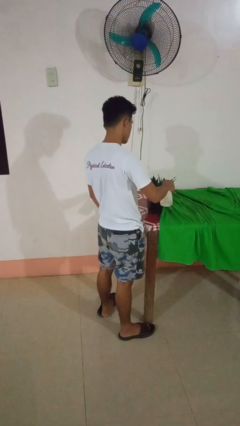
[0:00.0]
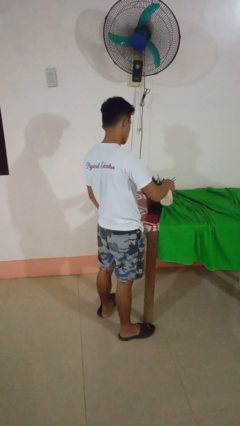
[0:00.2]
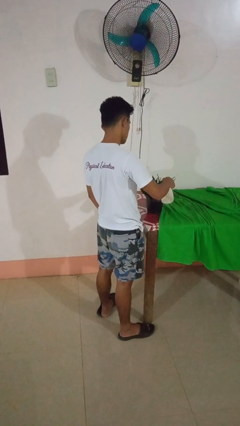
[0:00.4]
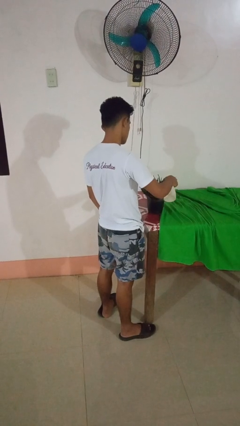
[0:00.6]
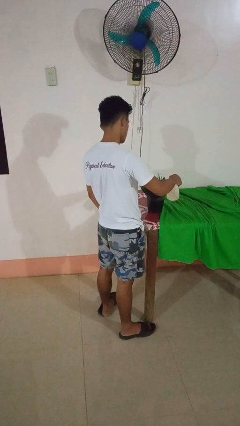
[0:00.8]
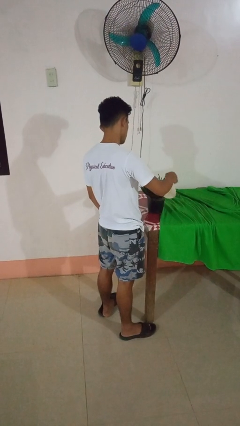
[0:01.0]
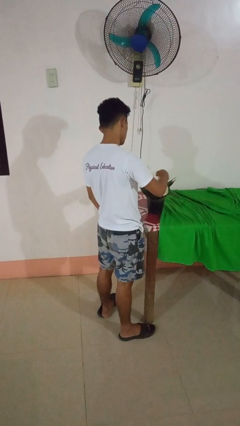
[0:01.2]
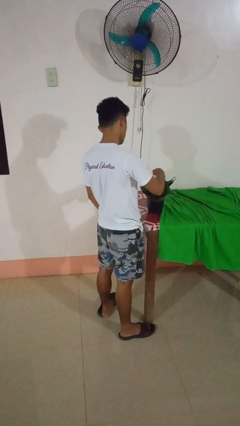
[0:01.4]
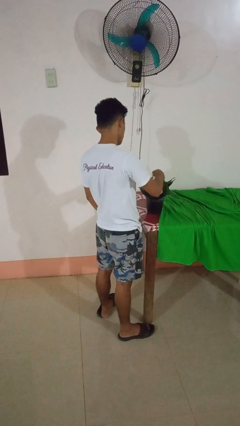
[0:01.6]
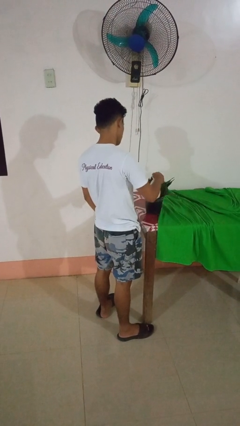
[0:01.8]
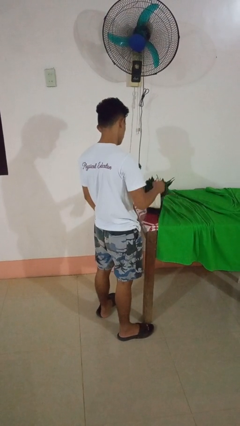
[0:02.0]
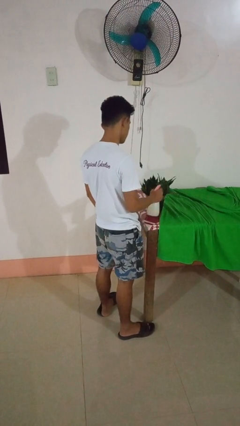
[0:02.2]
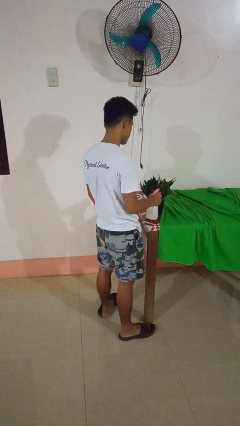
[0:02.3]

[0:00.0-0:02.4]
person waters houseplant

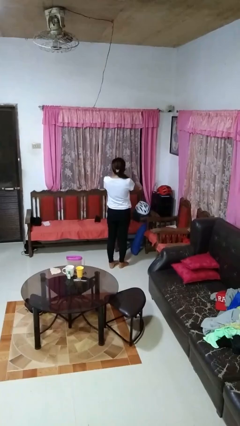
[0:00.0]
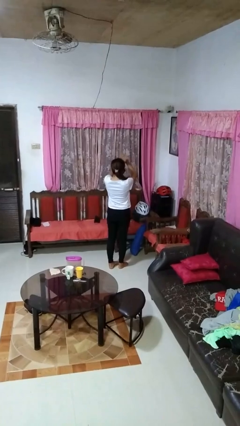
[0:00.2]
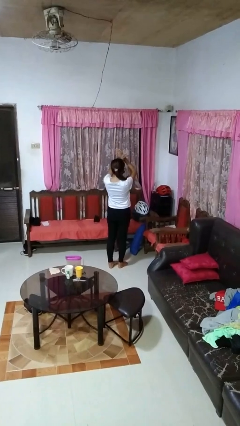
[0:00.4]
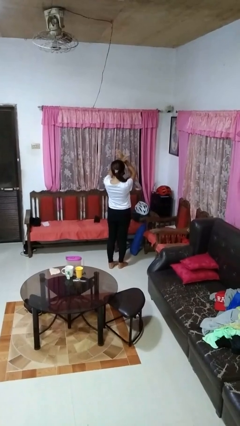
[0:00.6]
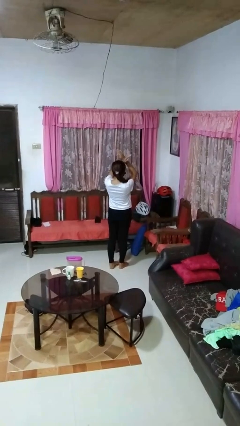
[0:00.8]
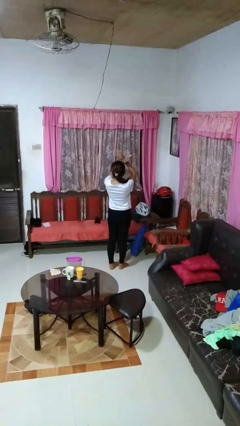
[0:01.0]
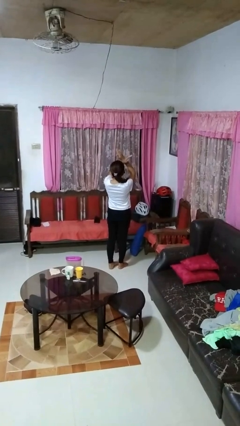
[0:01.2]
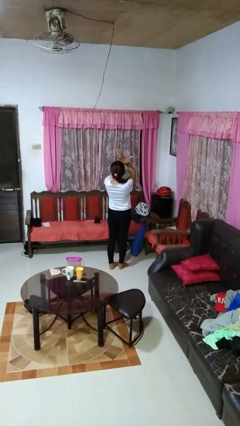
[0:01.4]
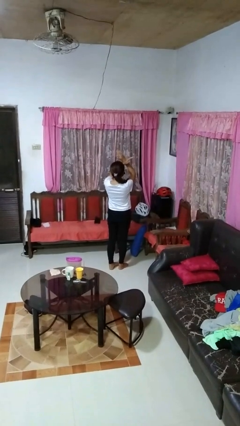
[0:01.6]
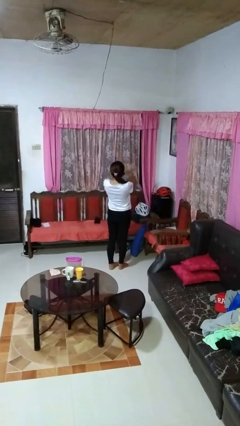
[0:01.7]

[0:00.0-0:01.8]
person gestures arms x

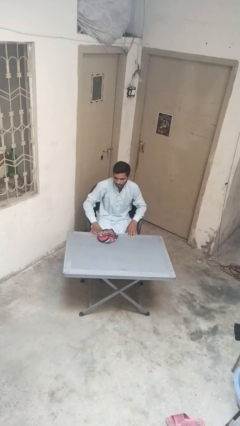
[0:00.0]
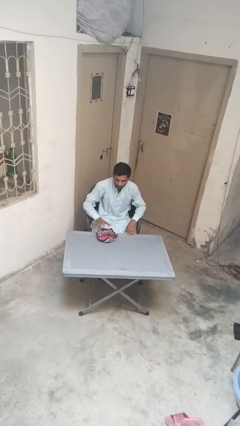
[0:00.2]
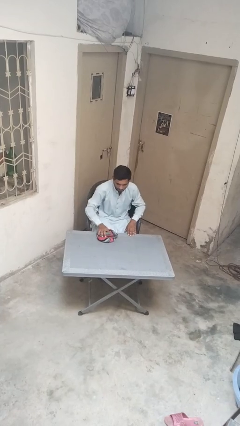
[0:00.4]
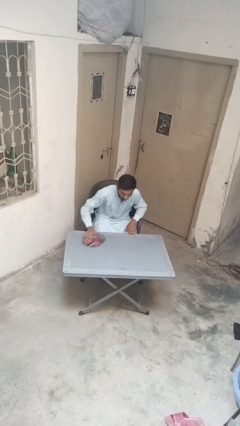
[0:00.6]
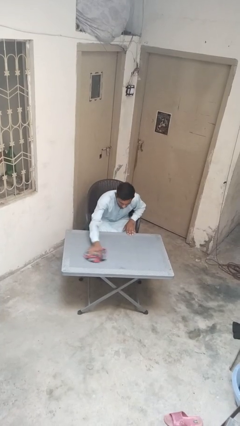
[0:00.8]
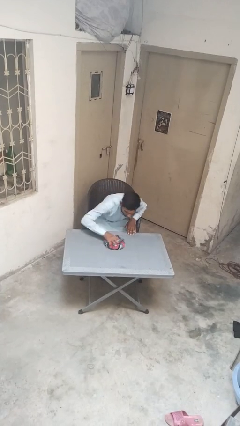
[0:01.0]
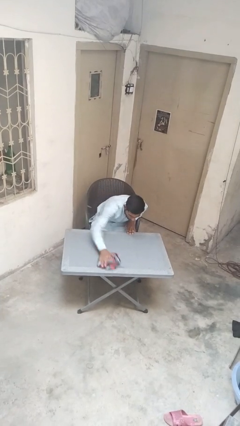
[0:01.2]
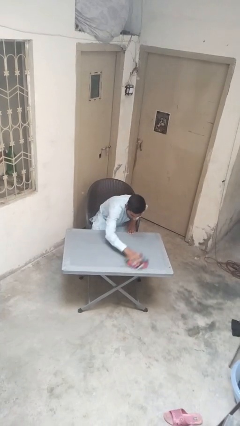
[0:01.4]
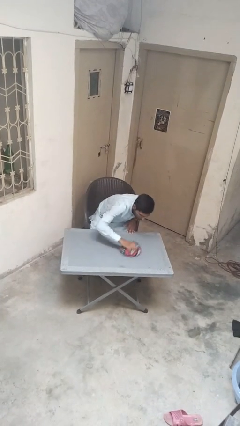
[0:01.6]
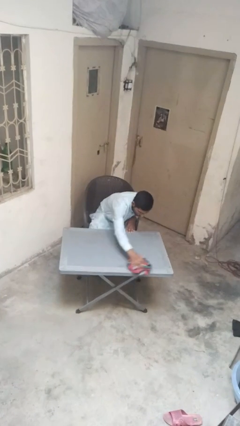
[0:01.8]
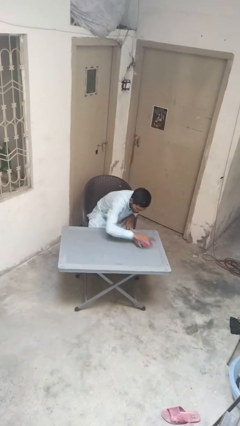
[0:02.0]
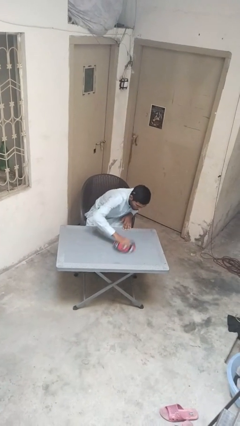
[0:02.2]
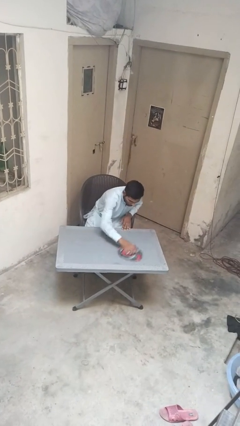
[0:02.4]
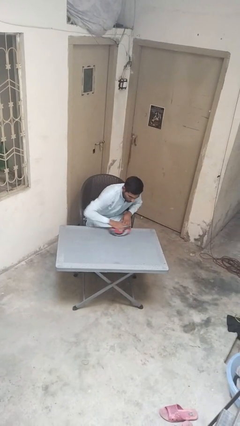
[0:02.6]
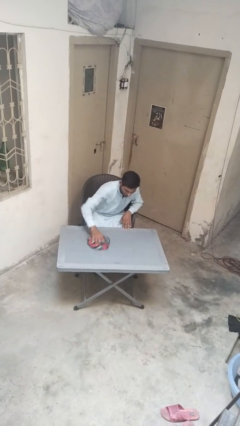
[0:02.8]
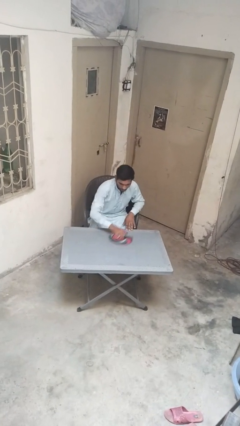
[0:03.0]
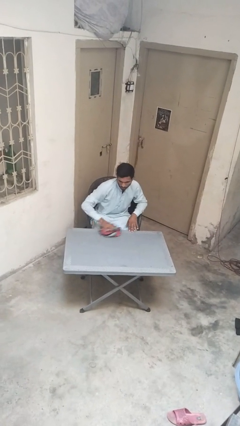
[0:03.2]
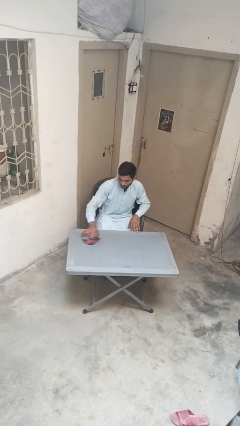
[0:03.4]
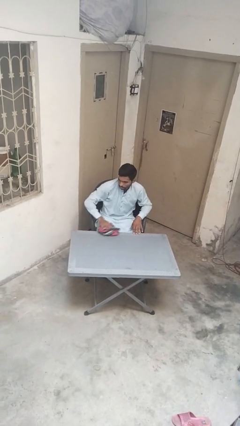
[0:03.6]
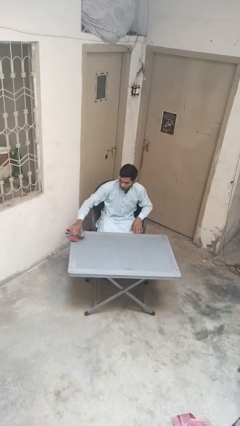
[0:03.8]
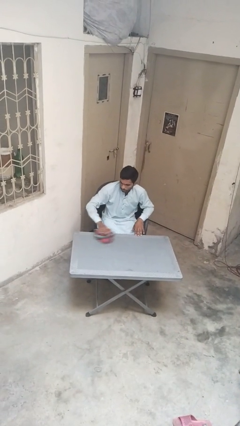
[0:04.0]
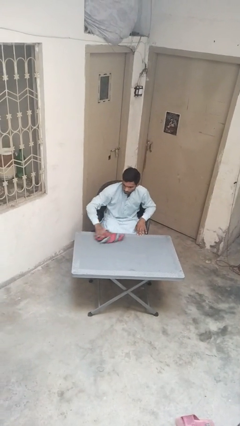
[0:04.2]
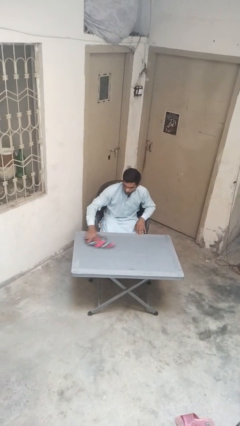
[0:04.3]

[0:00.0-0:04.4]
person cleans table with rag

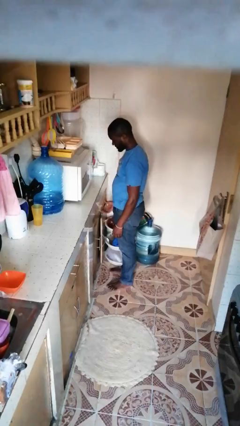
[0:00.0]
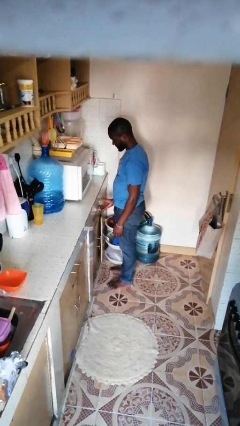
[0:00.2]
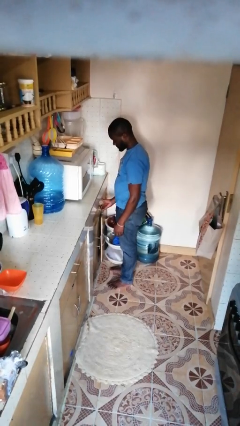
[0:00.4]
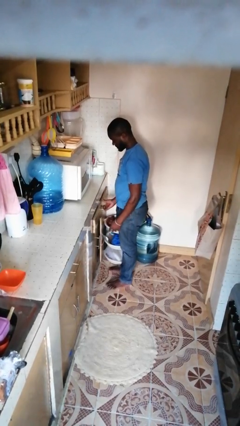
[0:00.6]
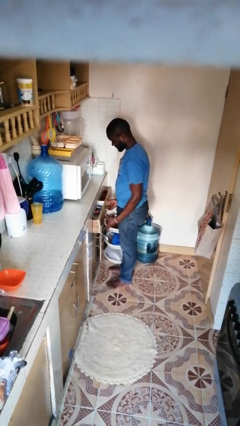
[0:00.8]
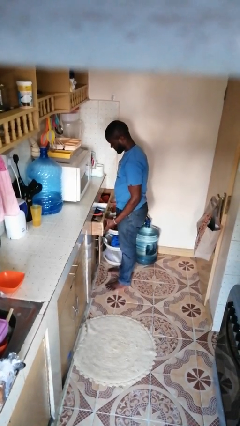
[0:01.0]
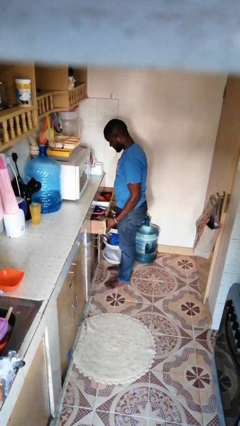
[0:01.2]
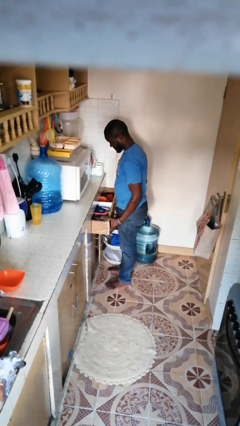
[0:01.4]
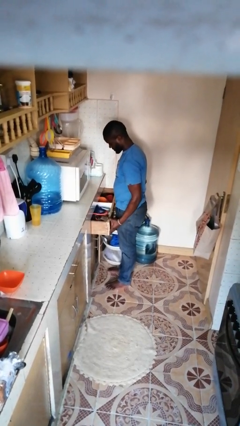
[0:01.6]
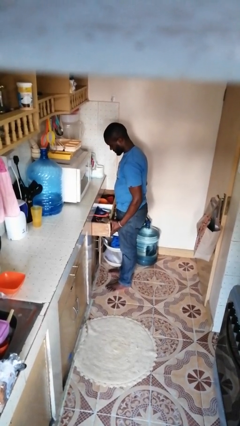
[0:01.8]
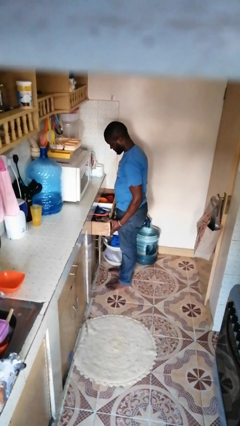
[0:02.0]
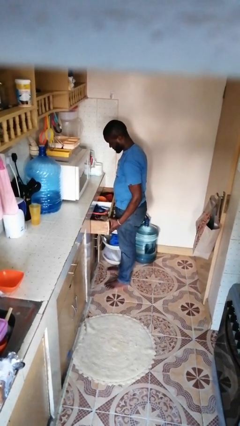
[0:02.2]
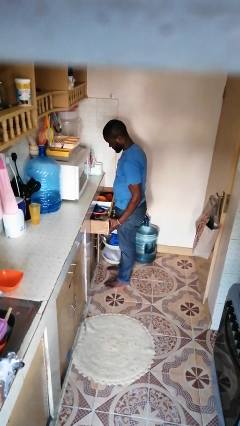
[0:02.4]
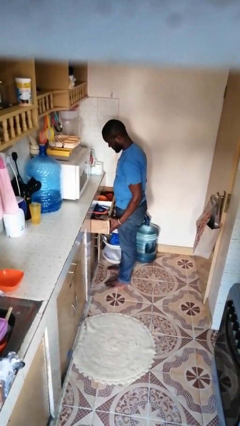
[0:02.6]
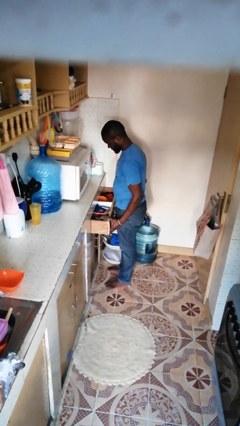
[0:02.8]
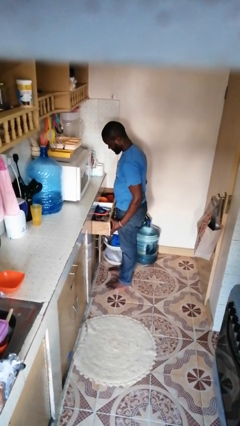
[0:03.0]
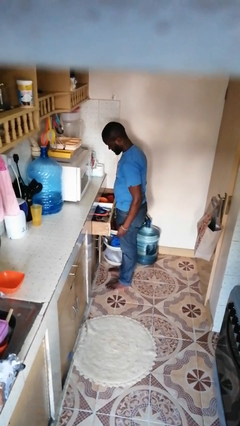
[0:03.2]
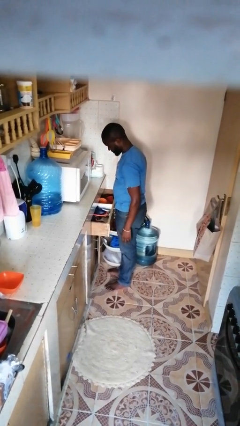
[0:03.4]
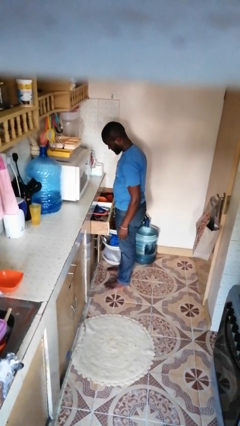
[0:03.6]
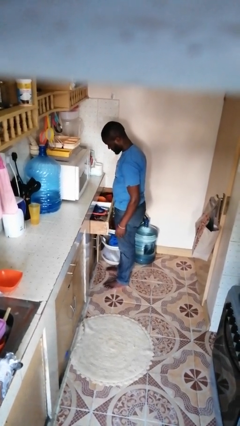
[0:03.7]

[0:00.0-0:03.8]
person opens kitchen drawer

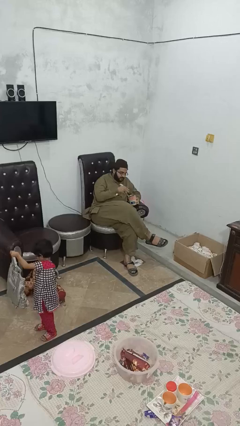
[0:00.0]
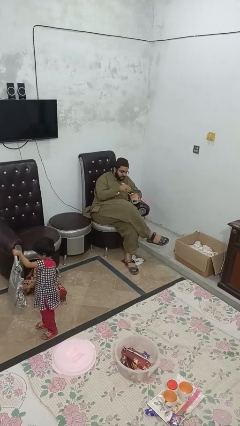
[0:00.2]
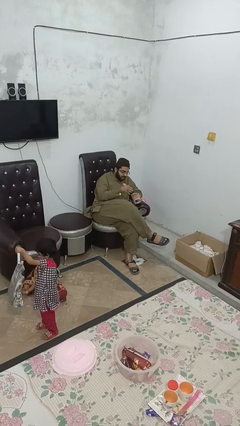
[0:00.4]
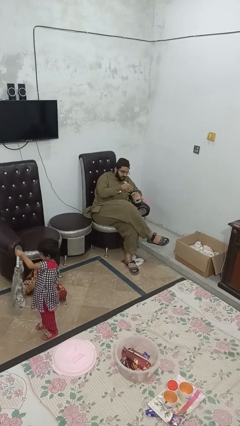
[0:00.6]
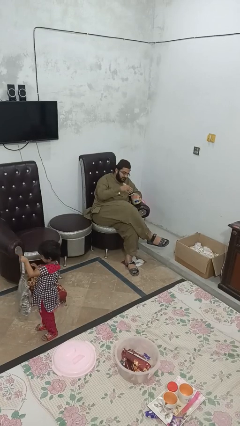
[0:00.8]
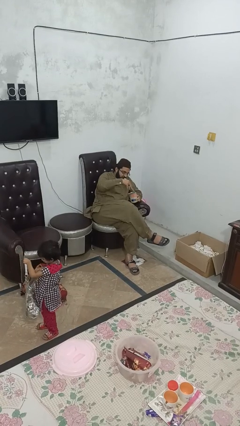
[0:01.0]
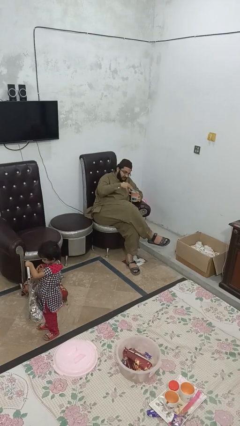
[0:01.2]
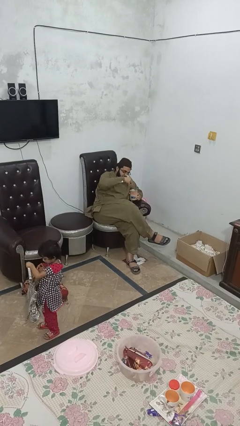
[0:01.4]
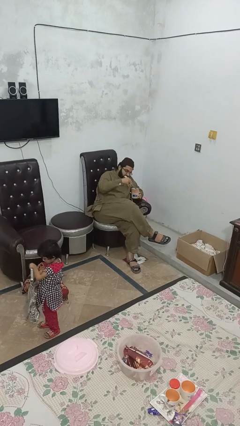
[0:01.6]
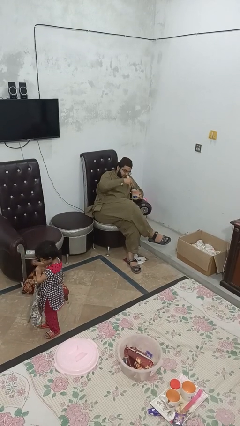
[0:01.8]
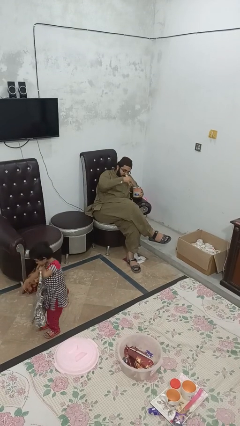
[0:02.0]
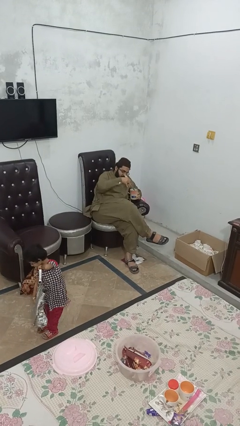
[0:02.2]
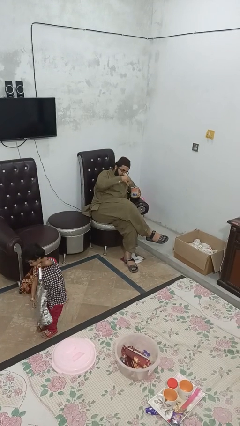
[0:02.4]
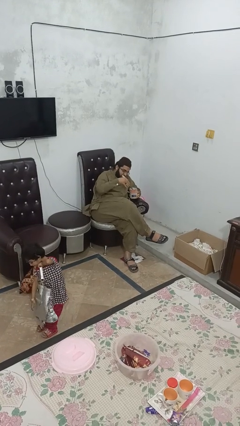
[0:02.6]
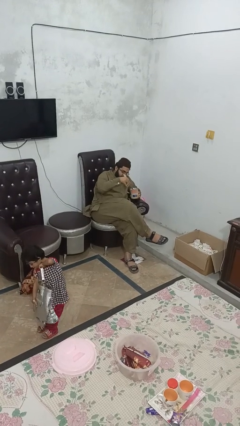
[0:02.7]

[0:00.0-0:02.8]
person opens can with can opener

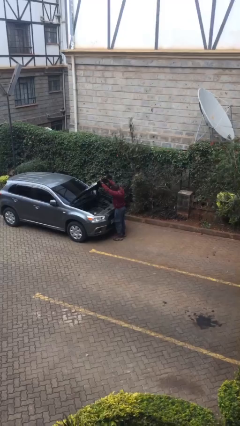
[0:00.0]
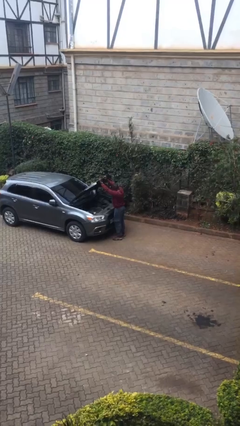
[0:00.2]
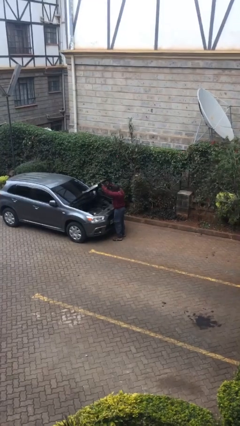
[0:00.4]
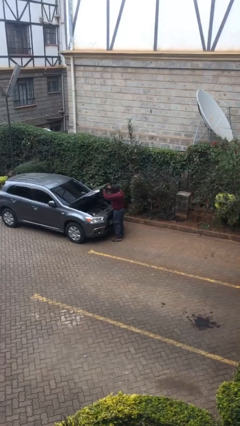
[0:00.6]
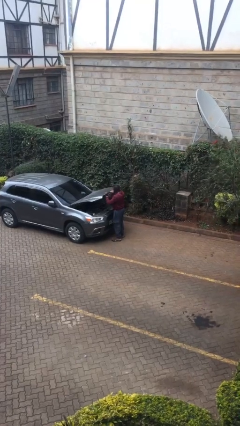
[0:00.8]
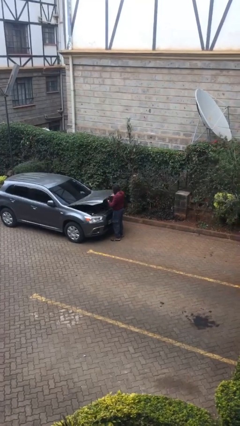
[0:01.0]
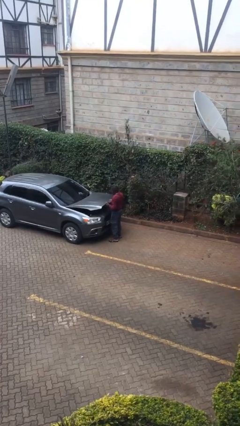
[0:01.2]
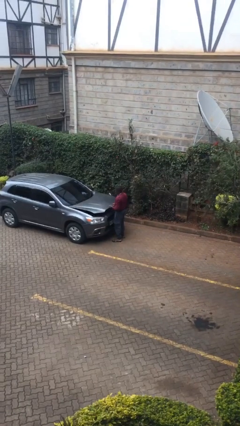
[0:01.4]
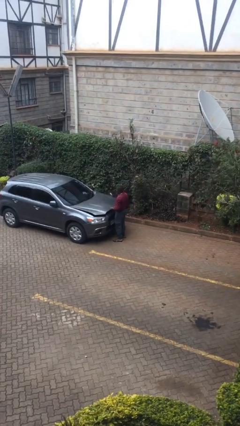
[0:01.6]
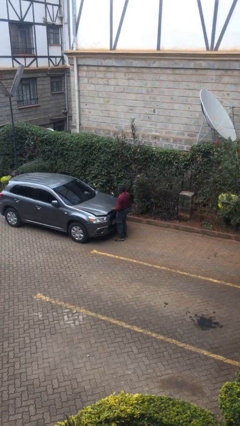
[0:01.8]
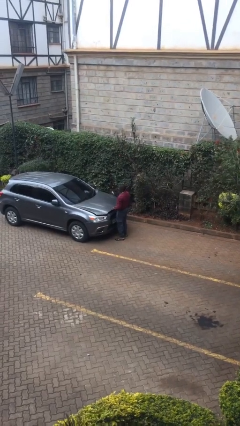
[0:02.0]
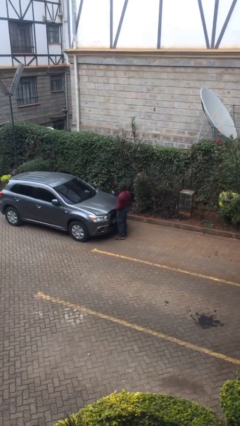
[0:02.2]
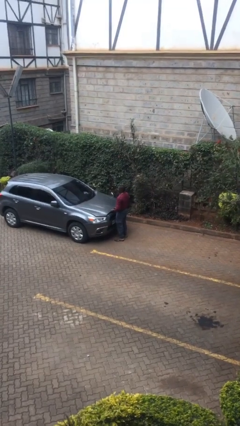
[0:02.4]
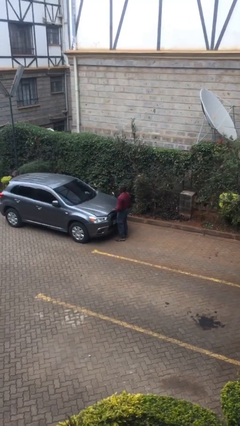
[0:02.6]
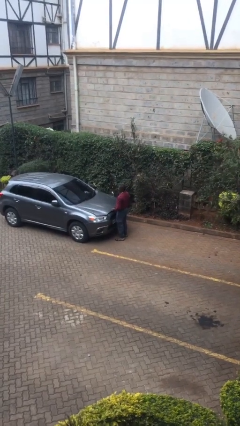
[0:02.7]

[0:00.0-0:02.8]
person closes car hood
